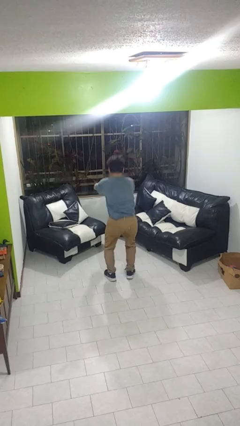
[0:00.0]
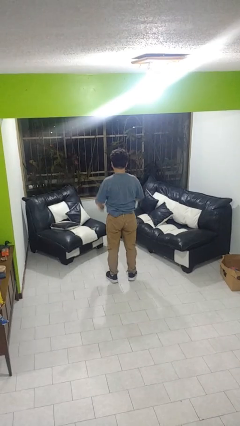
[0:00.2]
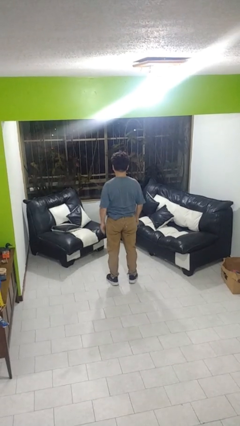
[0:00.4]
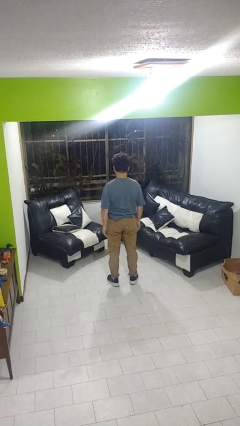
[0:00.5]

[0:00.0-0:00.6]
person stands up

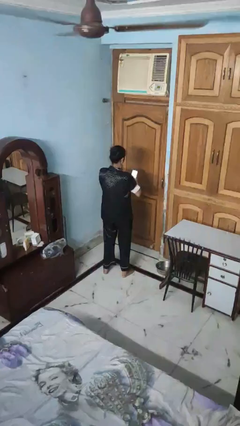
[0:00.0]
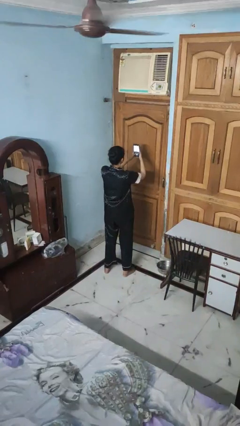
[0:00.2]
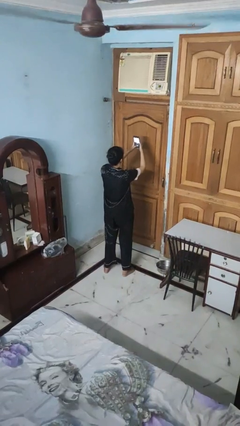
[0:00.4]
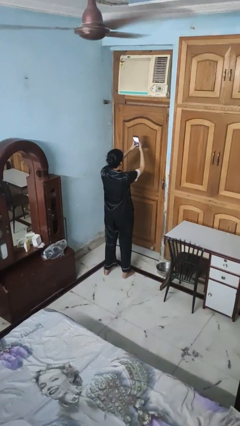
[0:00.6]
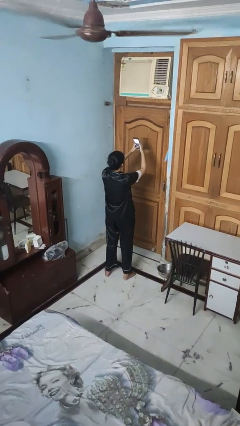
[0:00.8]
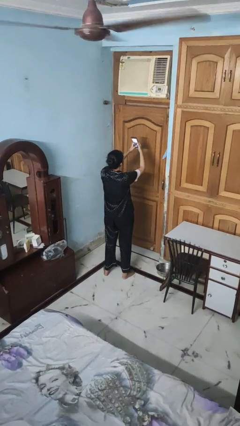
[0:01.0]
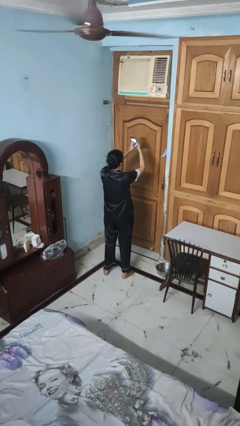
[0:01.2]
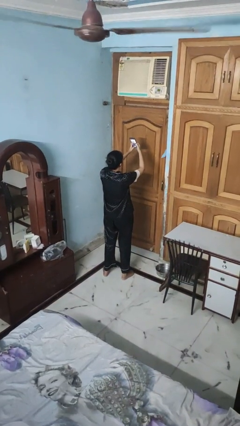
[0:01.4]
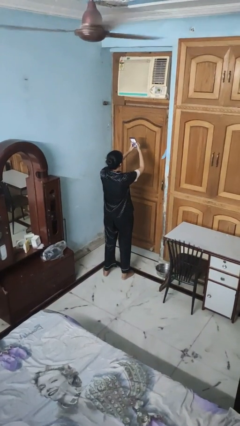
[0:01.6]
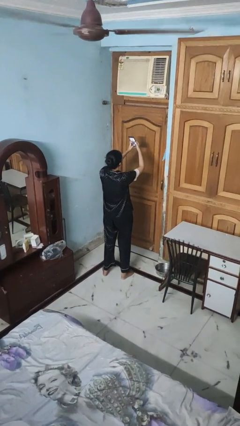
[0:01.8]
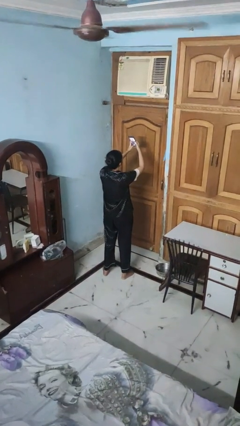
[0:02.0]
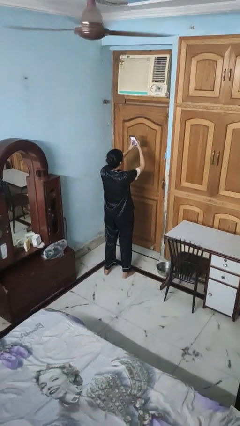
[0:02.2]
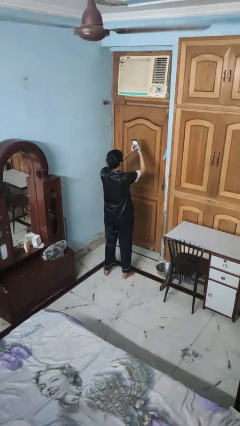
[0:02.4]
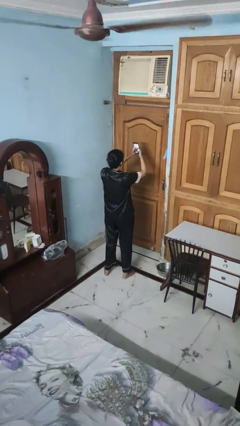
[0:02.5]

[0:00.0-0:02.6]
person takes selfie

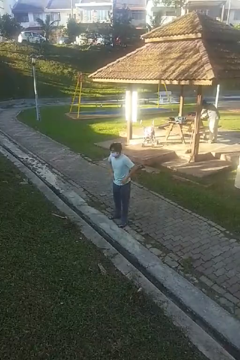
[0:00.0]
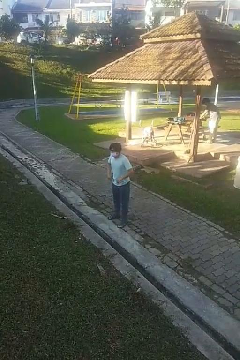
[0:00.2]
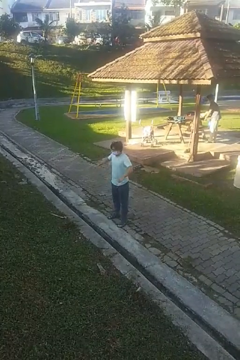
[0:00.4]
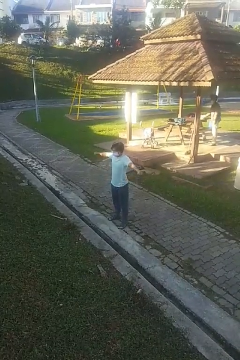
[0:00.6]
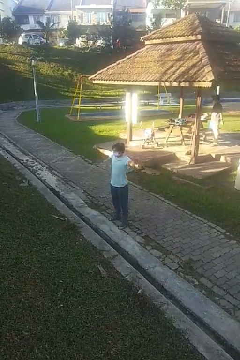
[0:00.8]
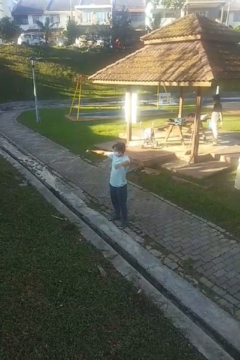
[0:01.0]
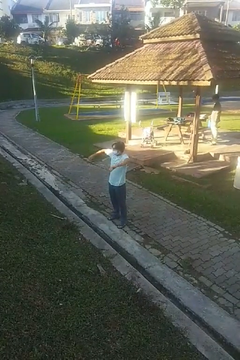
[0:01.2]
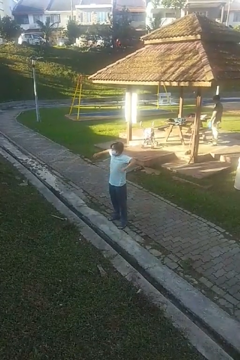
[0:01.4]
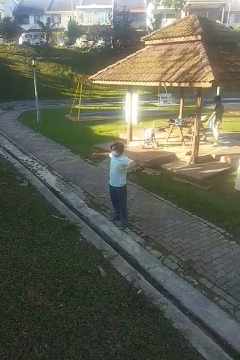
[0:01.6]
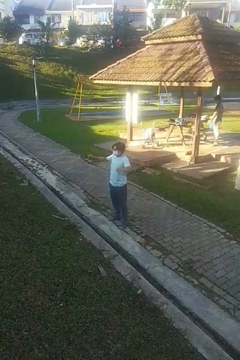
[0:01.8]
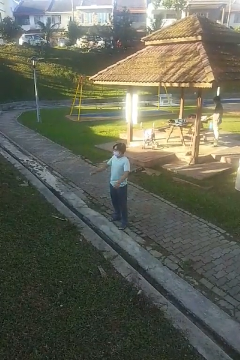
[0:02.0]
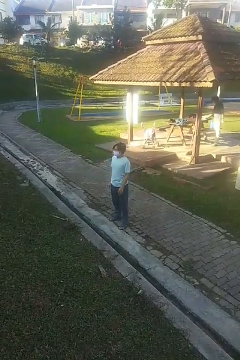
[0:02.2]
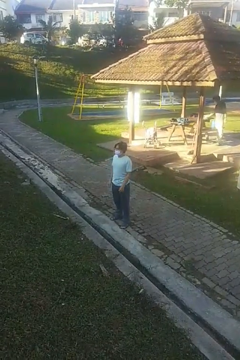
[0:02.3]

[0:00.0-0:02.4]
person stretches arms to side

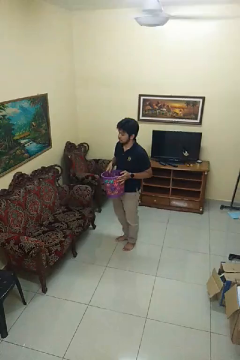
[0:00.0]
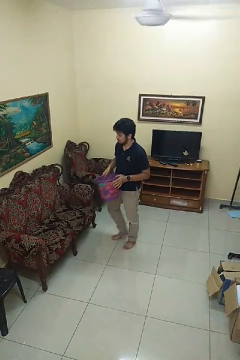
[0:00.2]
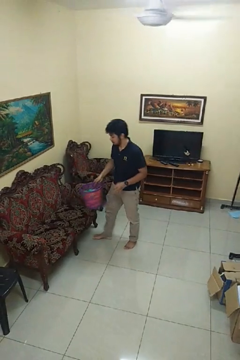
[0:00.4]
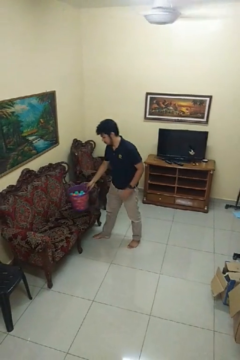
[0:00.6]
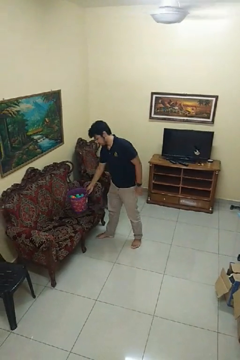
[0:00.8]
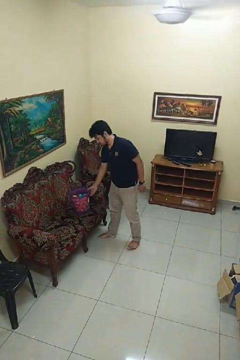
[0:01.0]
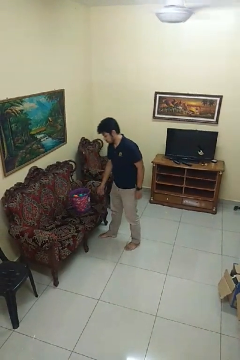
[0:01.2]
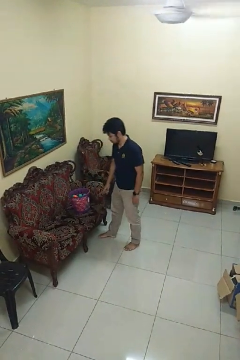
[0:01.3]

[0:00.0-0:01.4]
person puts down object on couch

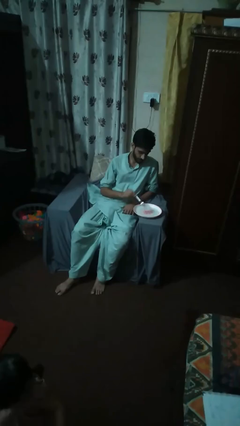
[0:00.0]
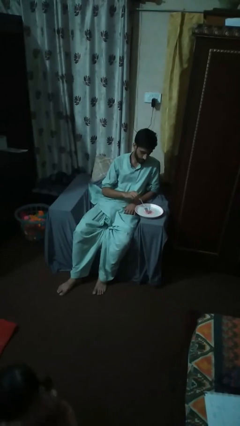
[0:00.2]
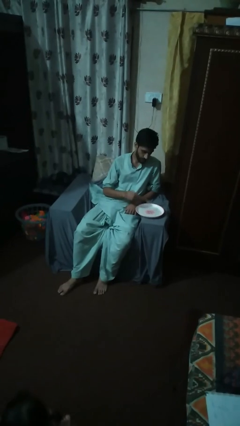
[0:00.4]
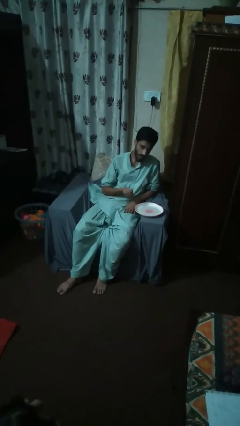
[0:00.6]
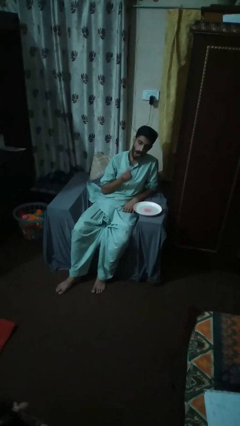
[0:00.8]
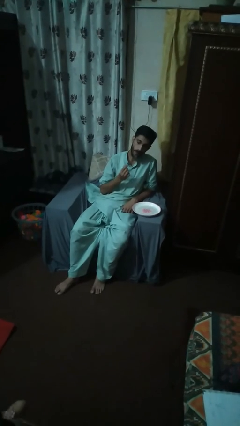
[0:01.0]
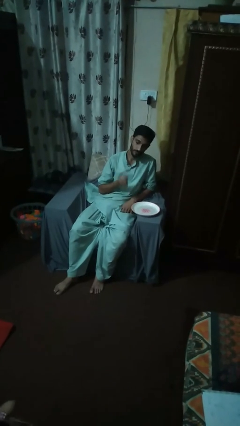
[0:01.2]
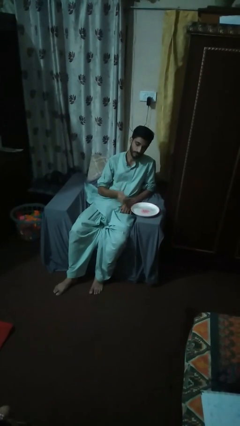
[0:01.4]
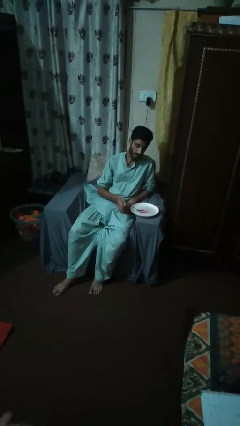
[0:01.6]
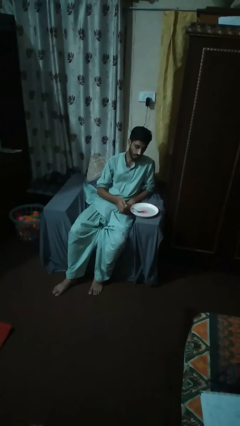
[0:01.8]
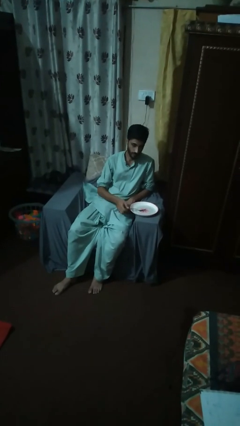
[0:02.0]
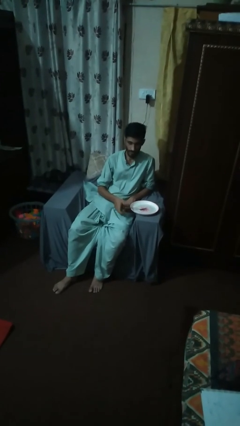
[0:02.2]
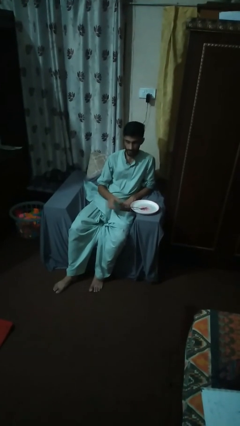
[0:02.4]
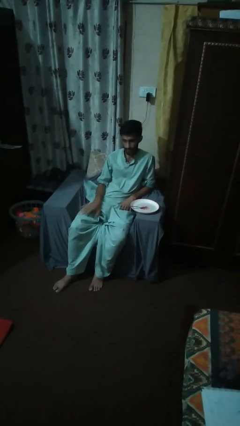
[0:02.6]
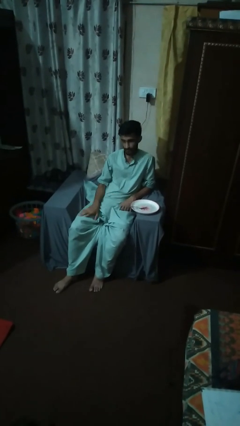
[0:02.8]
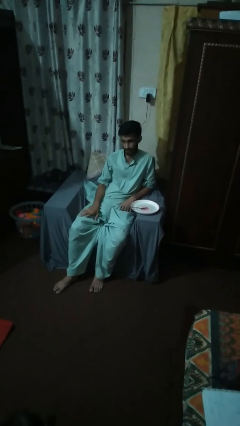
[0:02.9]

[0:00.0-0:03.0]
person eats with utensil

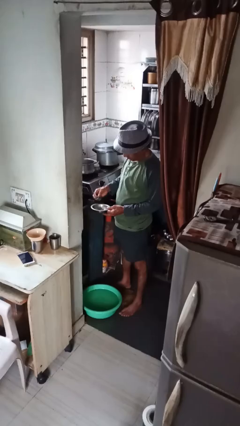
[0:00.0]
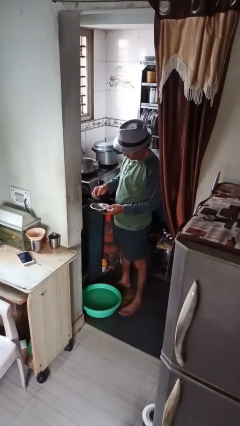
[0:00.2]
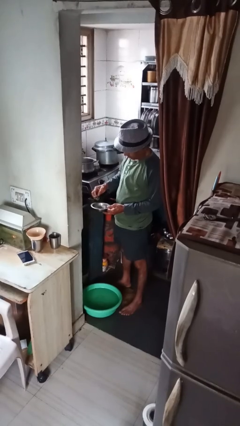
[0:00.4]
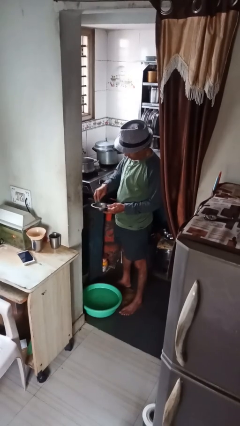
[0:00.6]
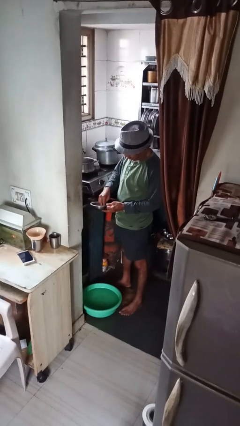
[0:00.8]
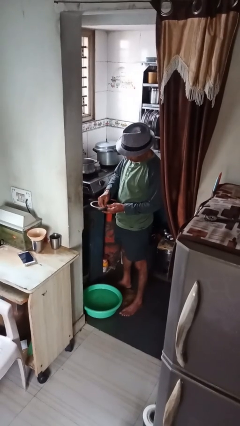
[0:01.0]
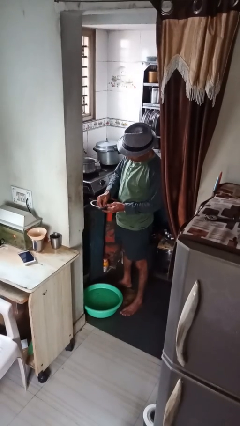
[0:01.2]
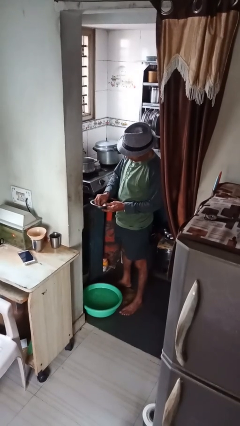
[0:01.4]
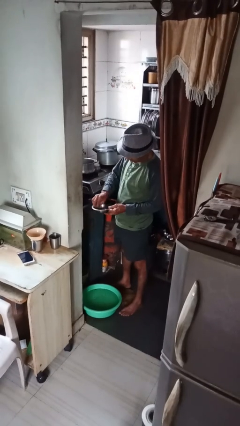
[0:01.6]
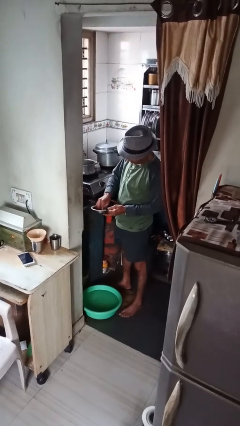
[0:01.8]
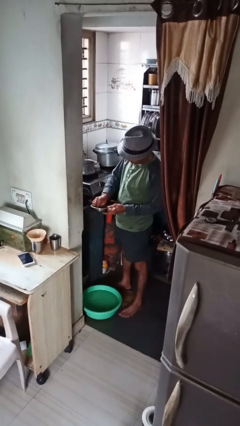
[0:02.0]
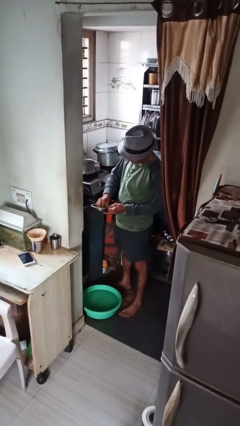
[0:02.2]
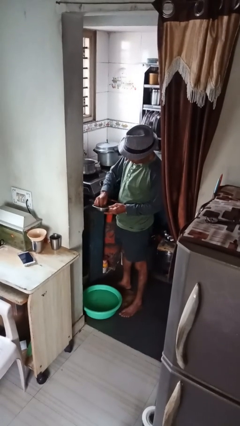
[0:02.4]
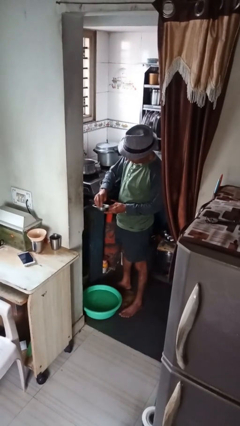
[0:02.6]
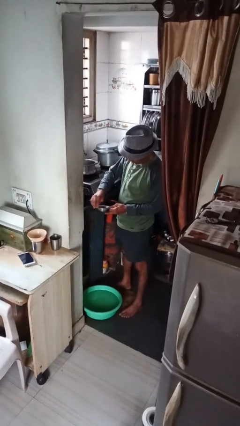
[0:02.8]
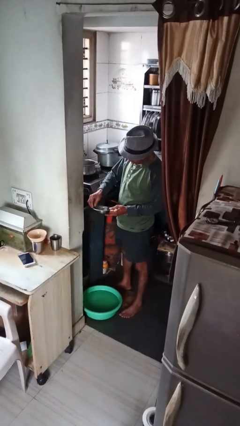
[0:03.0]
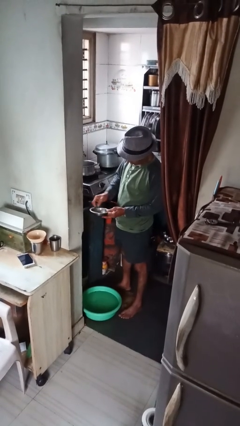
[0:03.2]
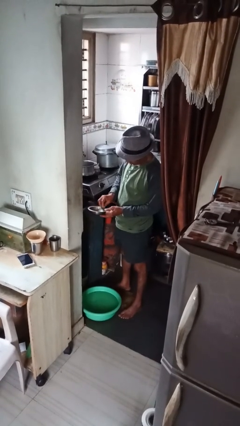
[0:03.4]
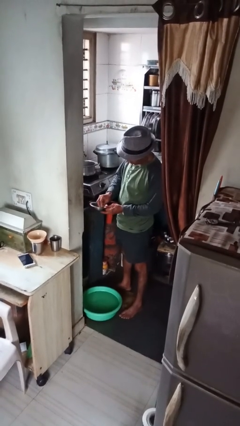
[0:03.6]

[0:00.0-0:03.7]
person washes dish

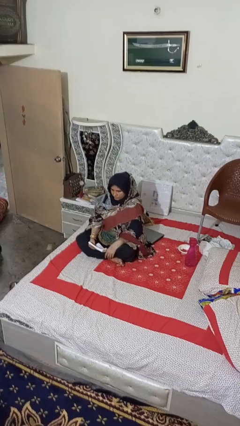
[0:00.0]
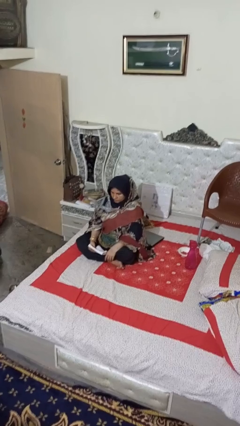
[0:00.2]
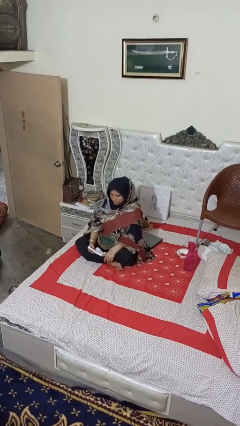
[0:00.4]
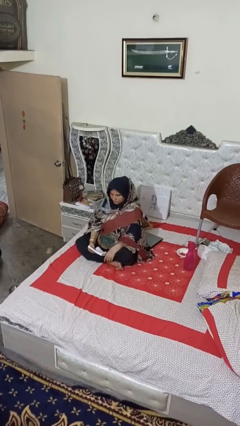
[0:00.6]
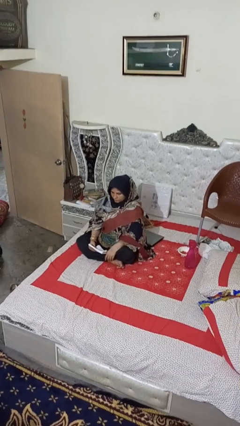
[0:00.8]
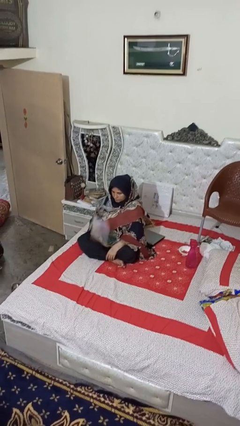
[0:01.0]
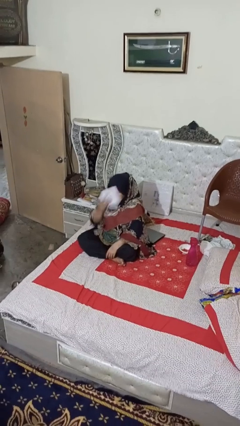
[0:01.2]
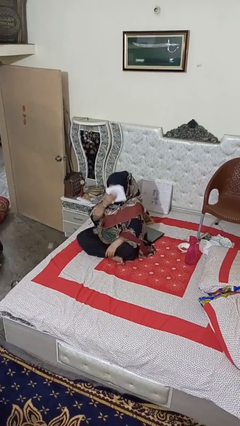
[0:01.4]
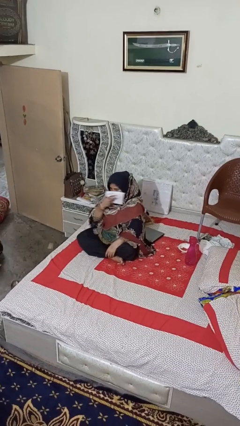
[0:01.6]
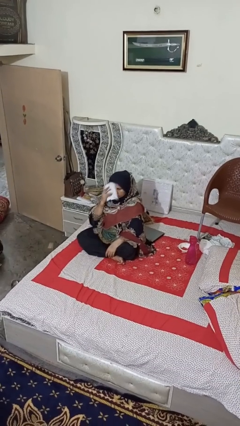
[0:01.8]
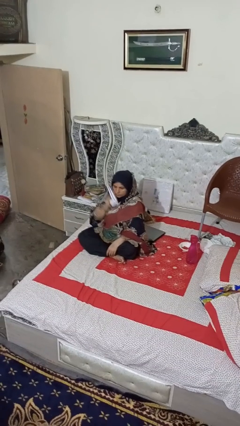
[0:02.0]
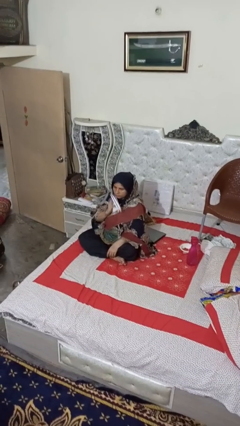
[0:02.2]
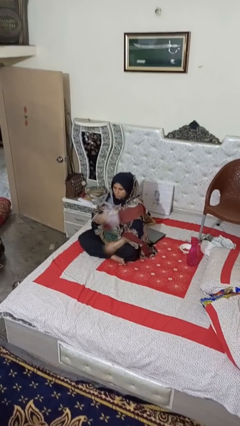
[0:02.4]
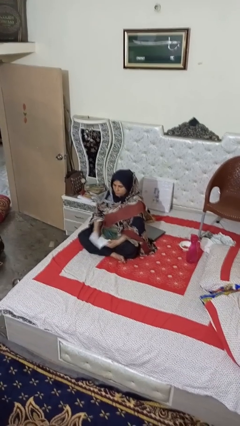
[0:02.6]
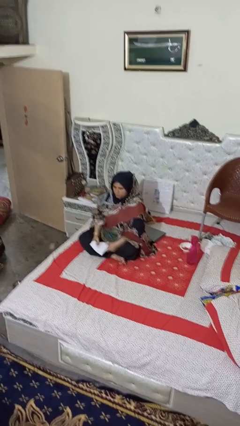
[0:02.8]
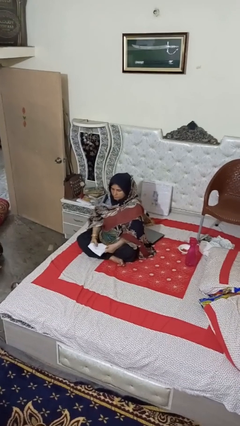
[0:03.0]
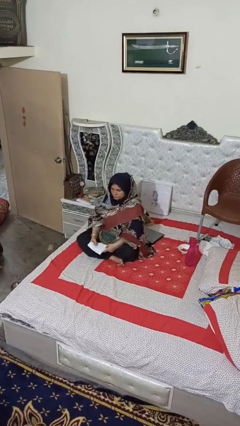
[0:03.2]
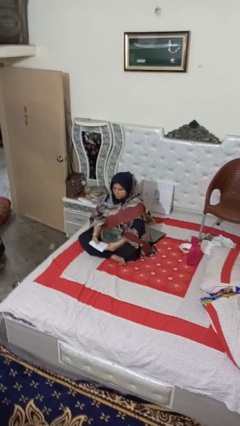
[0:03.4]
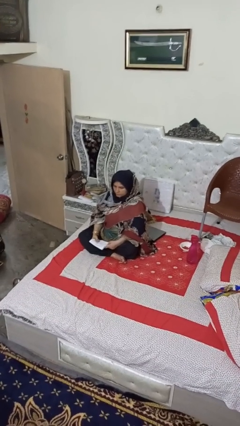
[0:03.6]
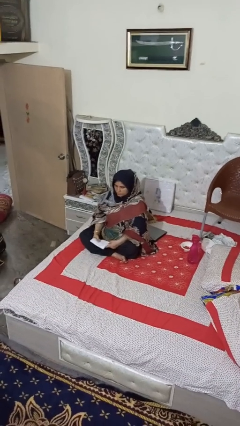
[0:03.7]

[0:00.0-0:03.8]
person wipes mouth with napkin

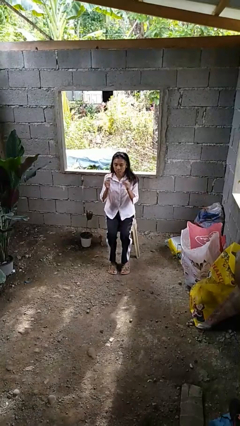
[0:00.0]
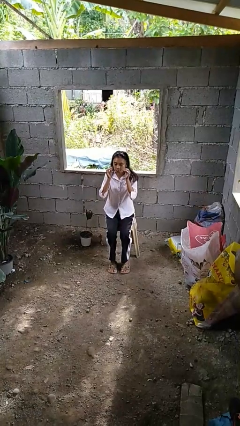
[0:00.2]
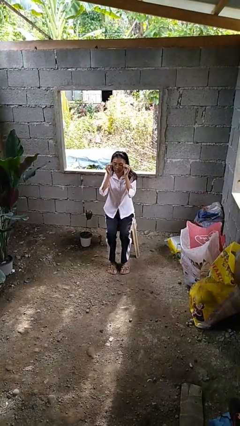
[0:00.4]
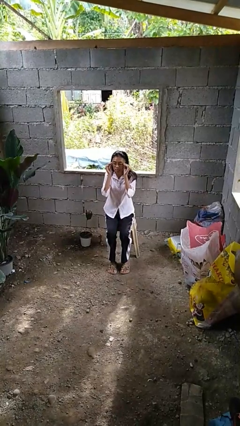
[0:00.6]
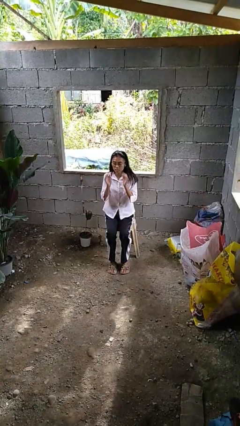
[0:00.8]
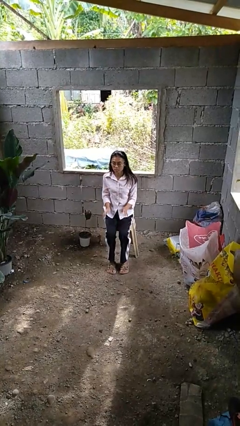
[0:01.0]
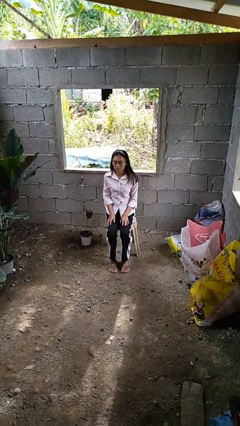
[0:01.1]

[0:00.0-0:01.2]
person puts on glasses
